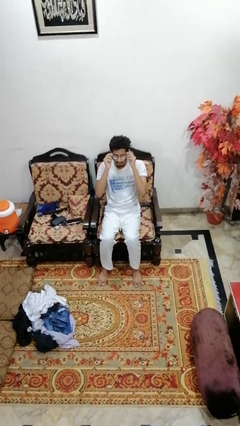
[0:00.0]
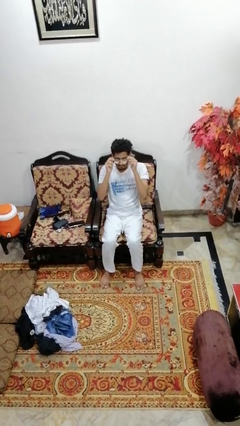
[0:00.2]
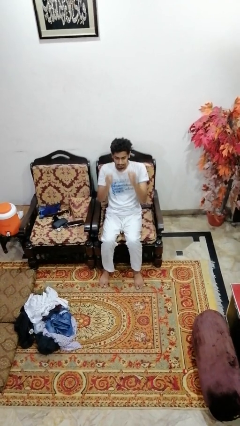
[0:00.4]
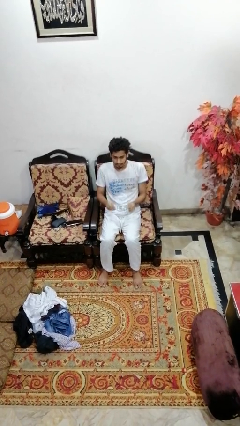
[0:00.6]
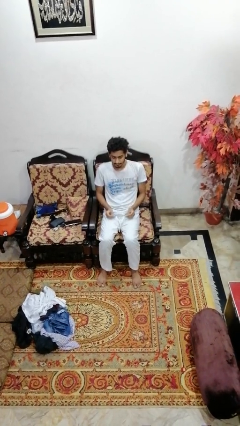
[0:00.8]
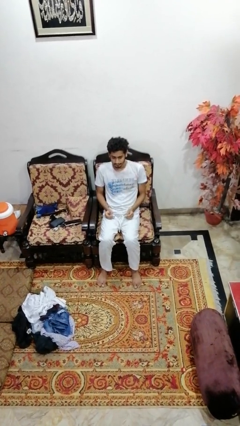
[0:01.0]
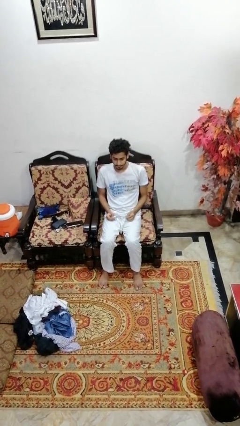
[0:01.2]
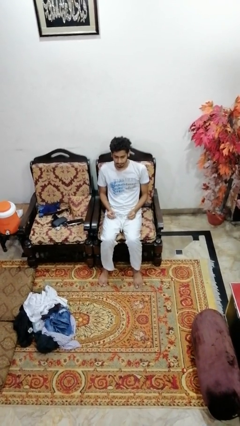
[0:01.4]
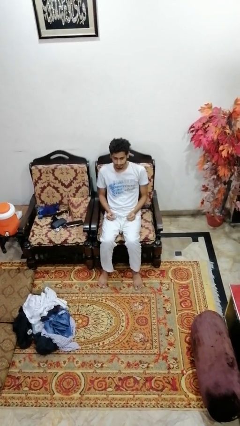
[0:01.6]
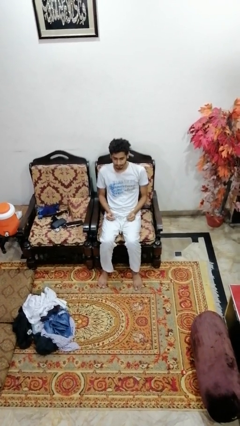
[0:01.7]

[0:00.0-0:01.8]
person takes off glasses

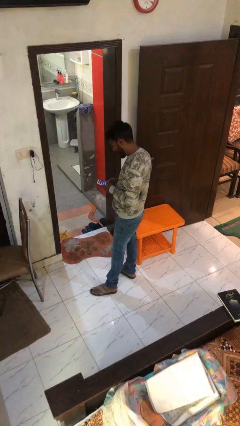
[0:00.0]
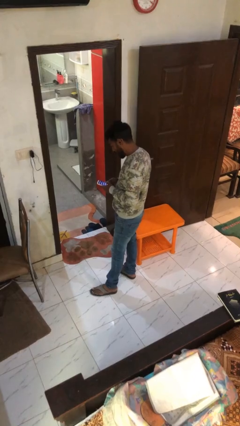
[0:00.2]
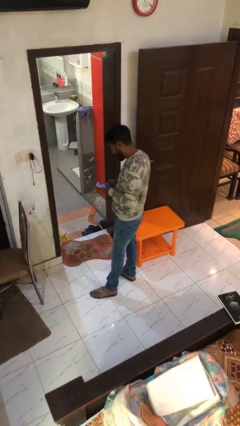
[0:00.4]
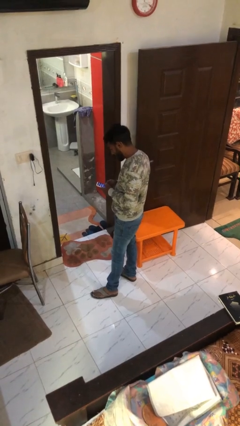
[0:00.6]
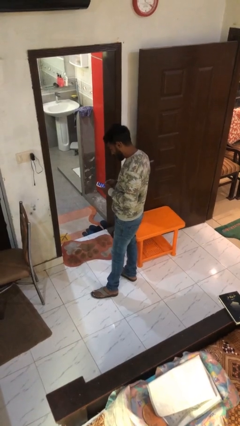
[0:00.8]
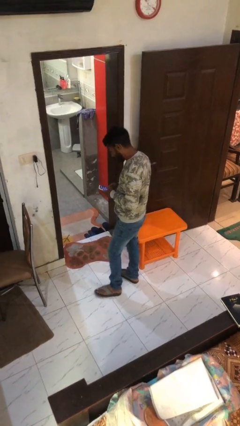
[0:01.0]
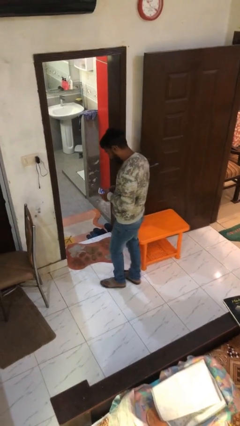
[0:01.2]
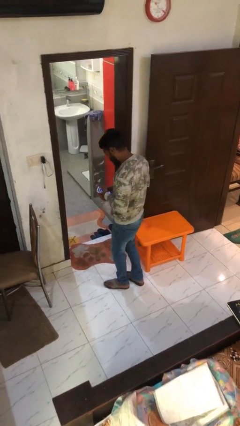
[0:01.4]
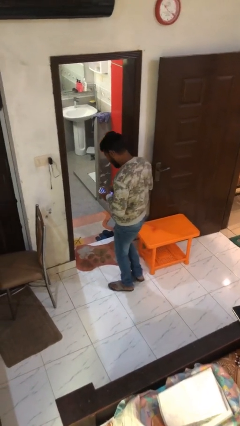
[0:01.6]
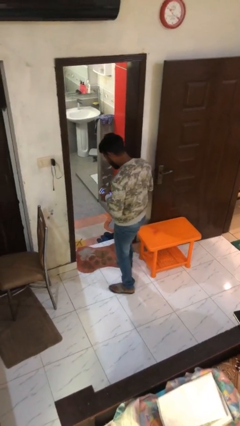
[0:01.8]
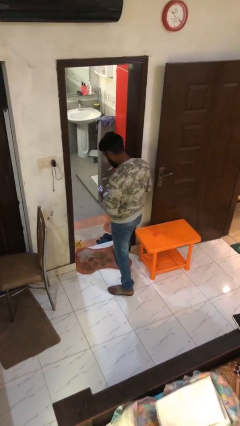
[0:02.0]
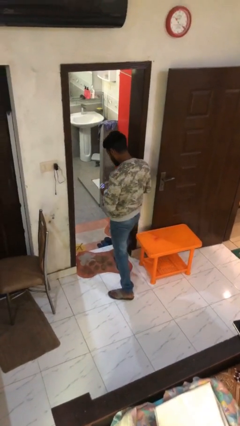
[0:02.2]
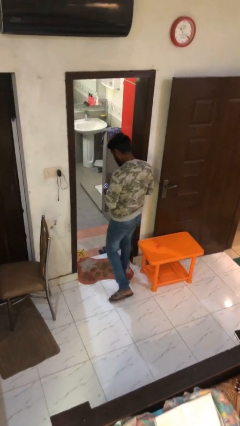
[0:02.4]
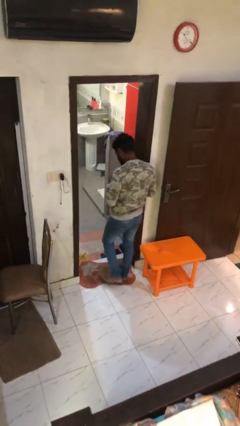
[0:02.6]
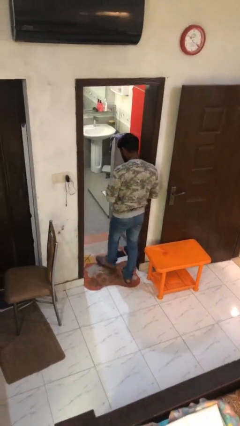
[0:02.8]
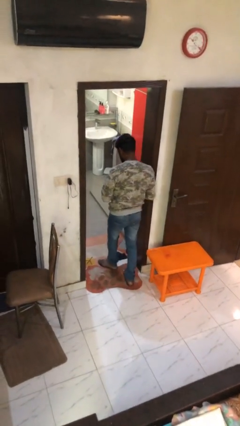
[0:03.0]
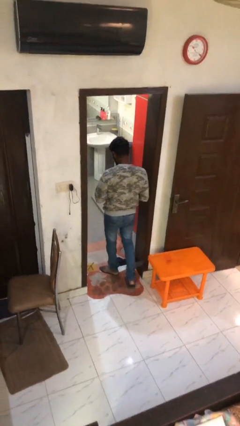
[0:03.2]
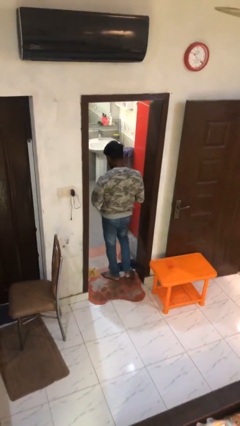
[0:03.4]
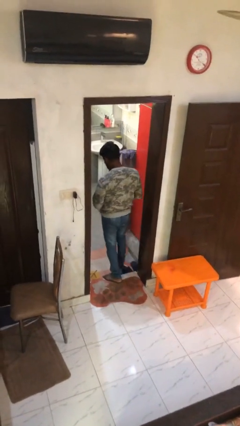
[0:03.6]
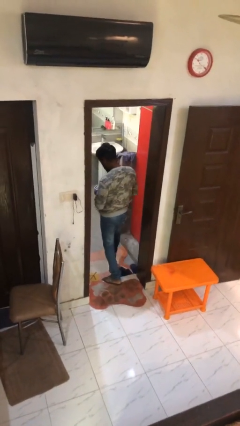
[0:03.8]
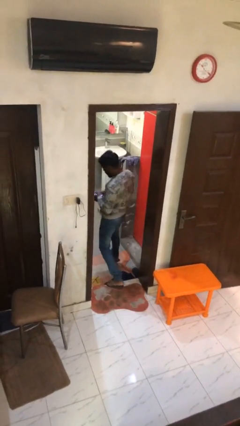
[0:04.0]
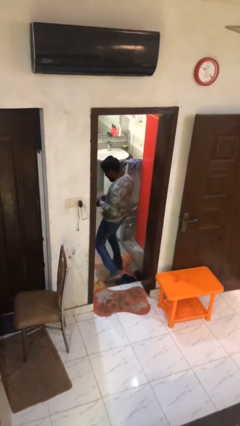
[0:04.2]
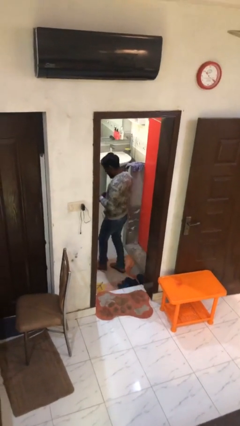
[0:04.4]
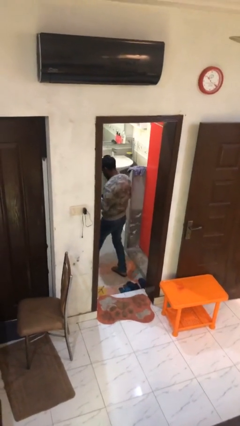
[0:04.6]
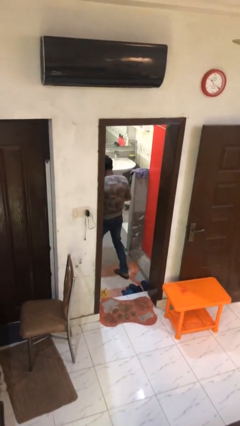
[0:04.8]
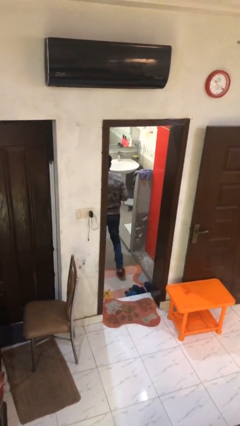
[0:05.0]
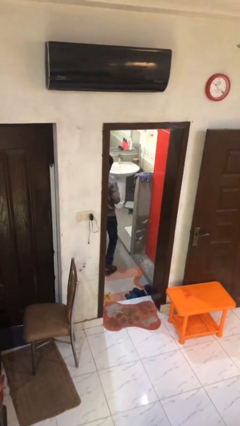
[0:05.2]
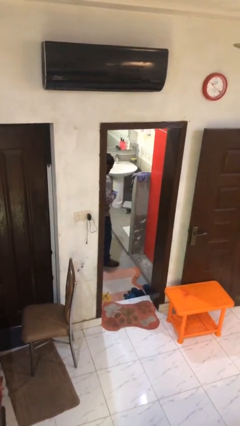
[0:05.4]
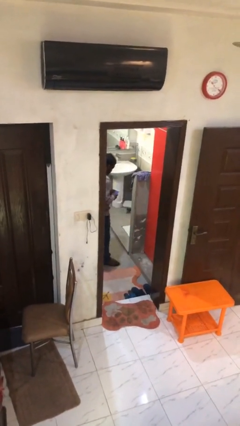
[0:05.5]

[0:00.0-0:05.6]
person texts on phone

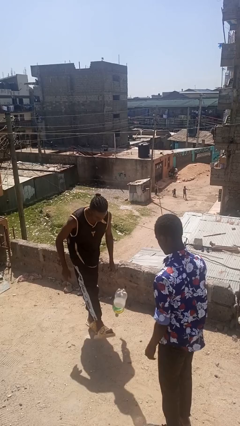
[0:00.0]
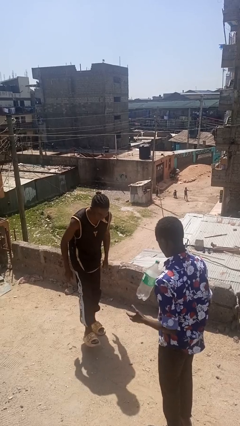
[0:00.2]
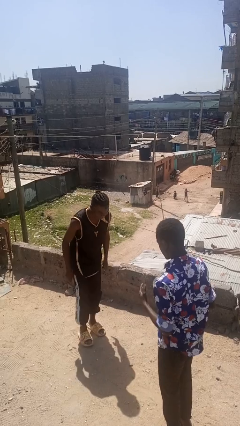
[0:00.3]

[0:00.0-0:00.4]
person kicks object to person

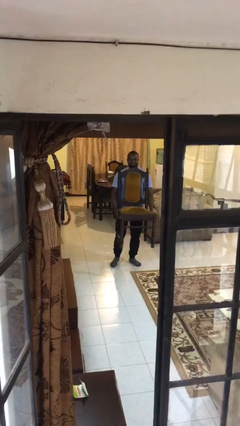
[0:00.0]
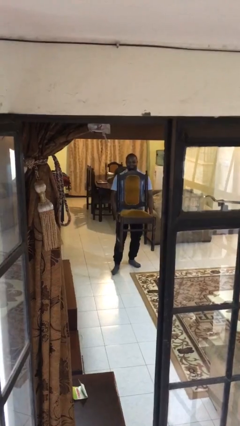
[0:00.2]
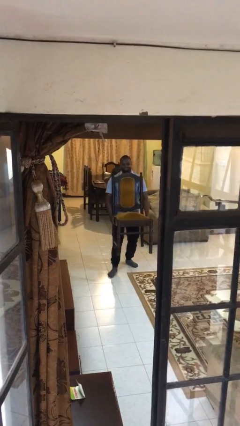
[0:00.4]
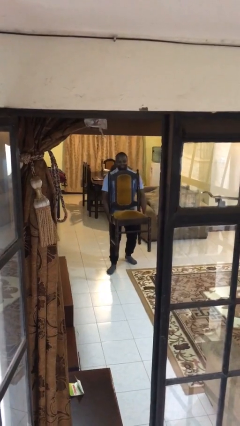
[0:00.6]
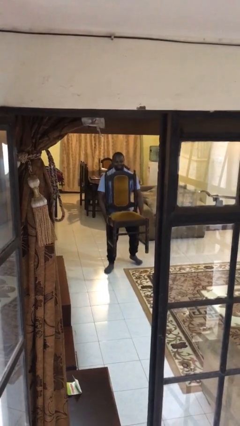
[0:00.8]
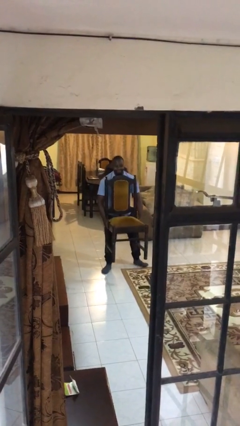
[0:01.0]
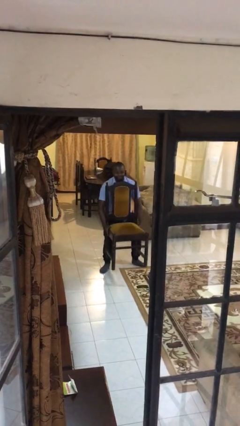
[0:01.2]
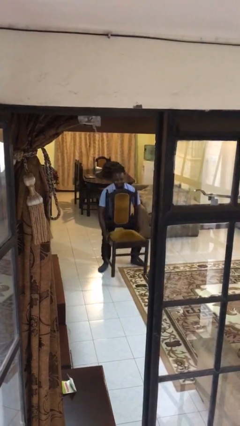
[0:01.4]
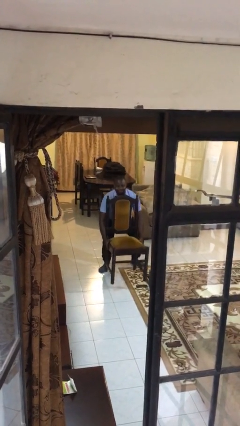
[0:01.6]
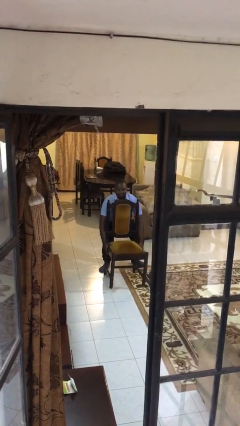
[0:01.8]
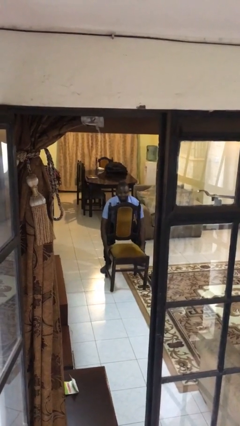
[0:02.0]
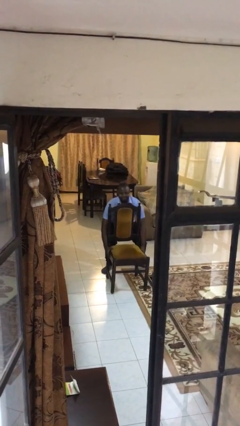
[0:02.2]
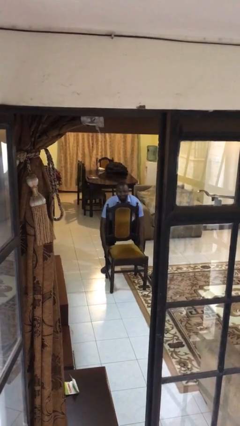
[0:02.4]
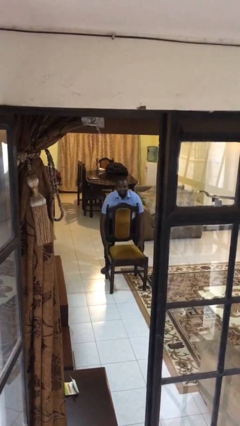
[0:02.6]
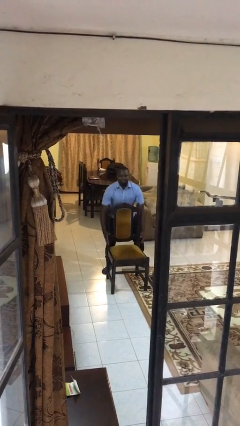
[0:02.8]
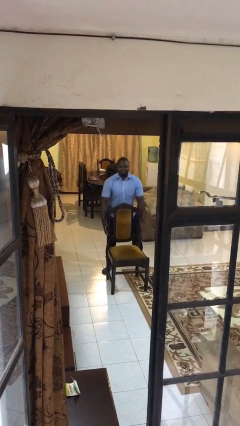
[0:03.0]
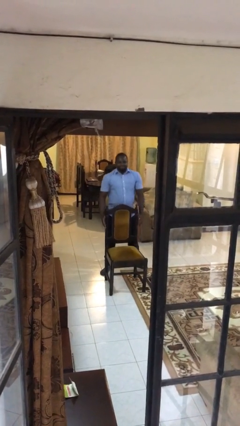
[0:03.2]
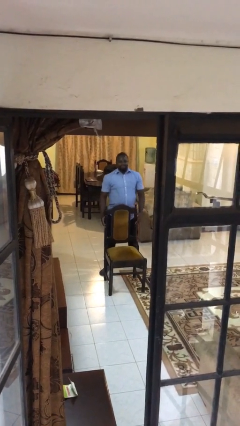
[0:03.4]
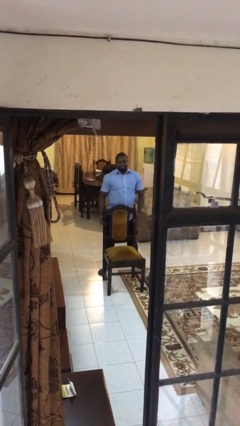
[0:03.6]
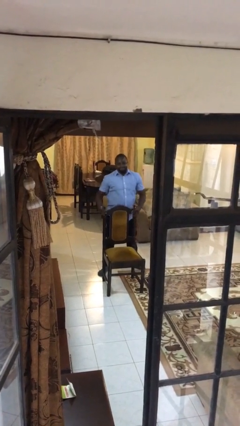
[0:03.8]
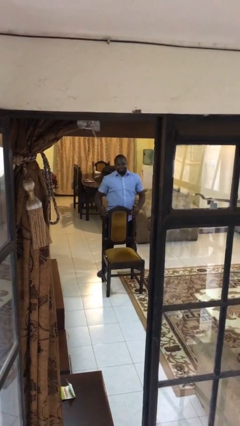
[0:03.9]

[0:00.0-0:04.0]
person puts down object on floor

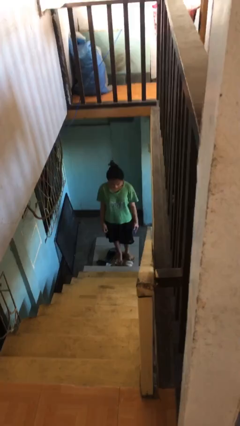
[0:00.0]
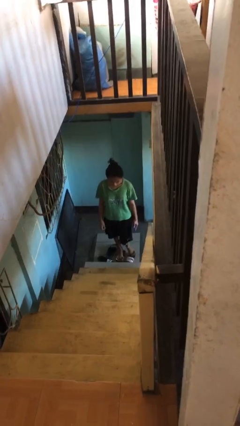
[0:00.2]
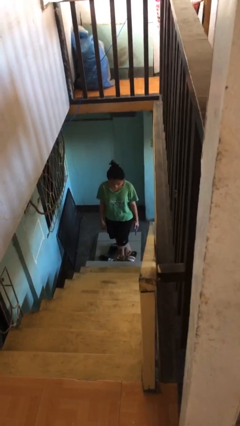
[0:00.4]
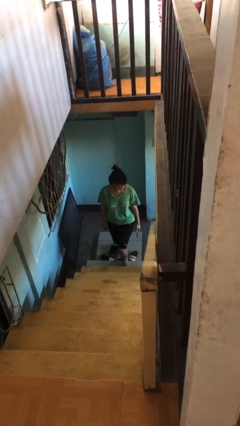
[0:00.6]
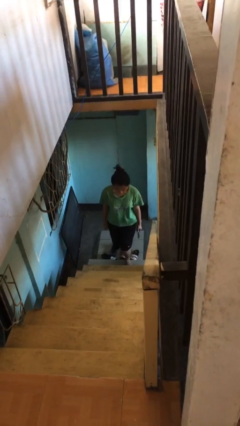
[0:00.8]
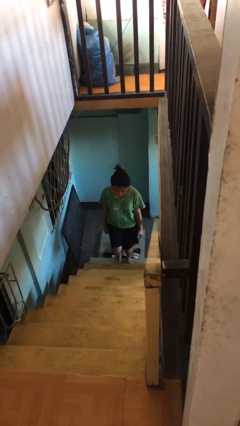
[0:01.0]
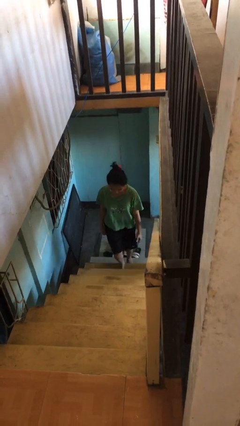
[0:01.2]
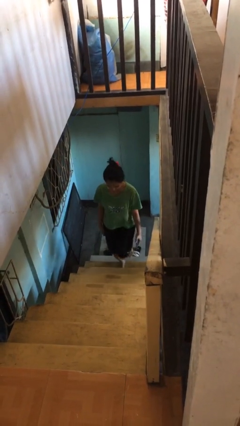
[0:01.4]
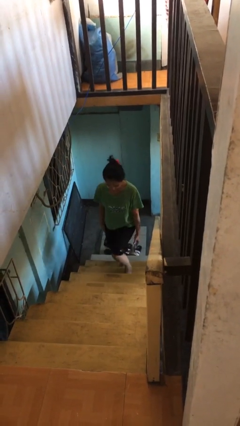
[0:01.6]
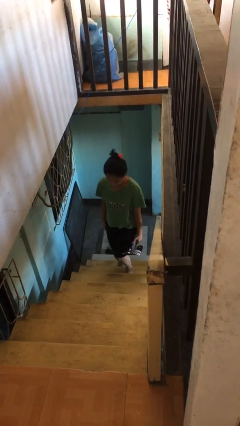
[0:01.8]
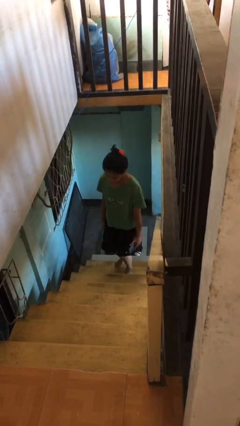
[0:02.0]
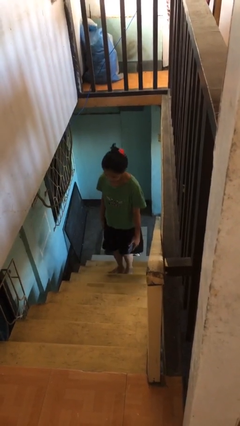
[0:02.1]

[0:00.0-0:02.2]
person climbs up stairs

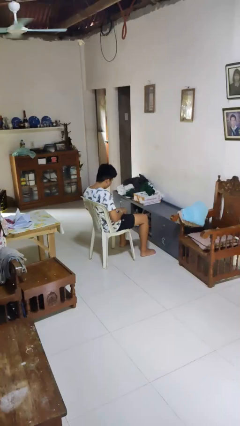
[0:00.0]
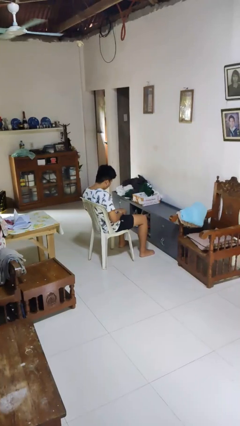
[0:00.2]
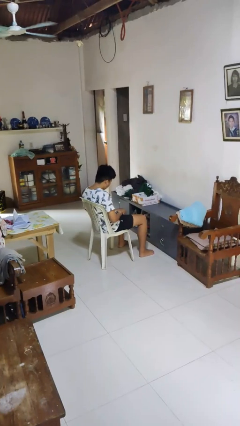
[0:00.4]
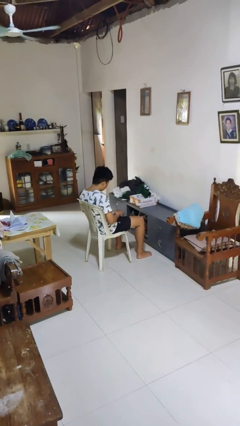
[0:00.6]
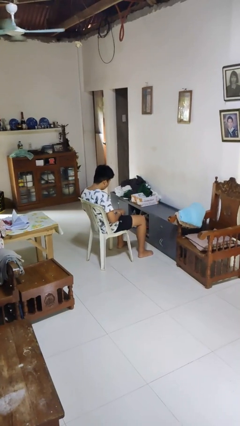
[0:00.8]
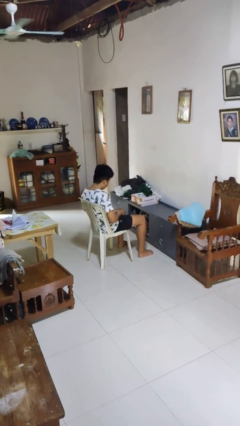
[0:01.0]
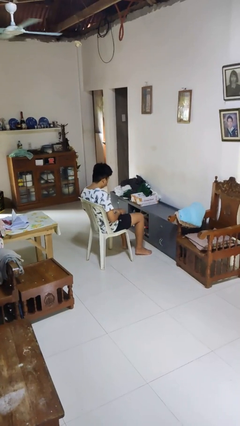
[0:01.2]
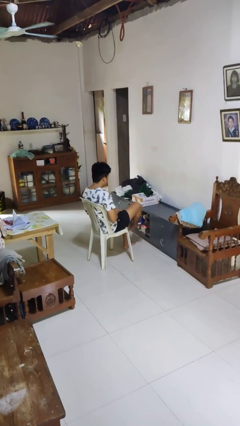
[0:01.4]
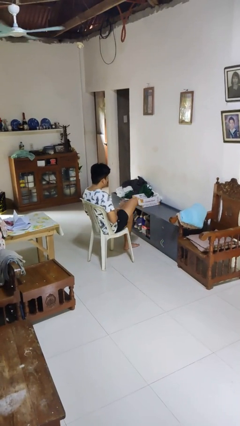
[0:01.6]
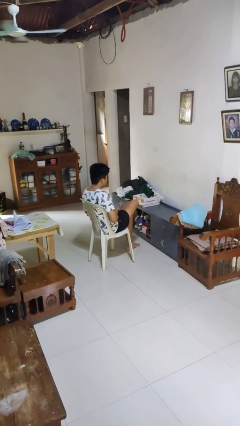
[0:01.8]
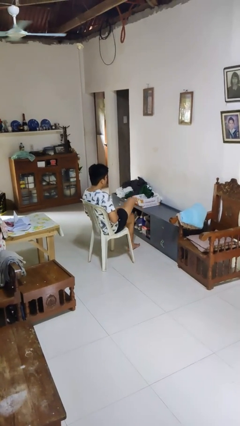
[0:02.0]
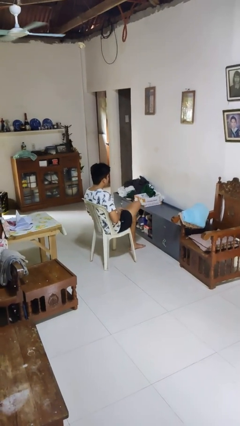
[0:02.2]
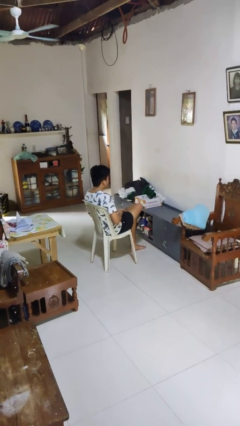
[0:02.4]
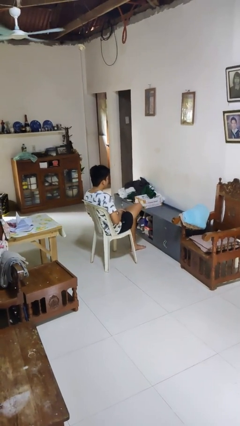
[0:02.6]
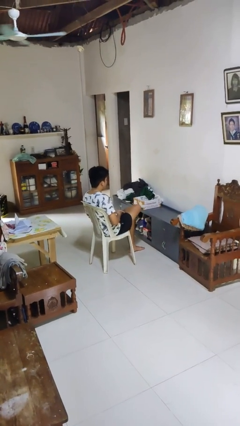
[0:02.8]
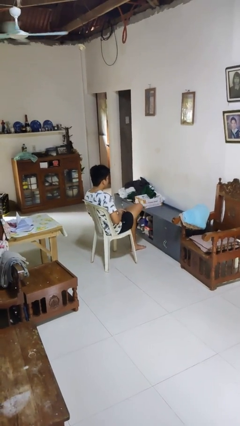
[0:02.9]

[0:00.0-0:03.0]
person crosses legs

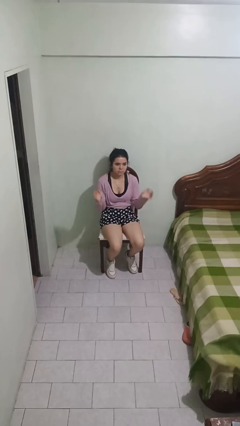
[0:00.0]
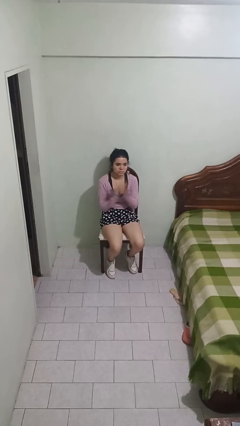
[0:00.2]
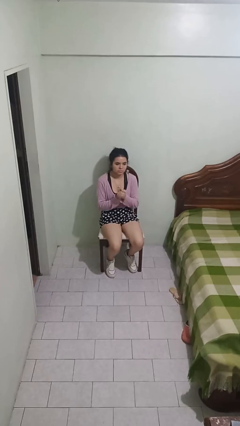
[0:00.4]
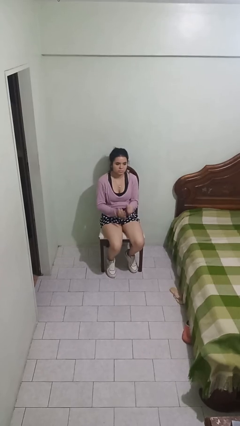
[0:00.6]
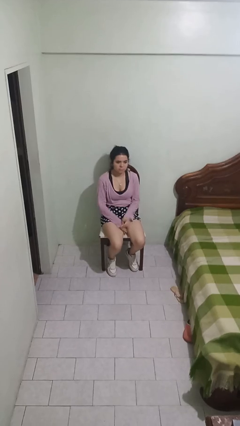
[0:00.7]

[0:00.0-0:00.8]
person claps hands
